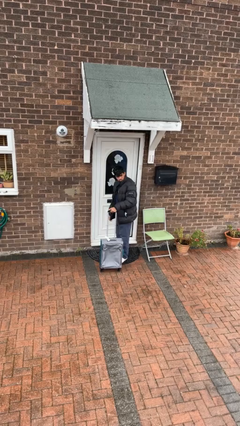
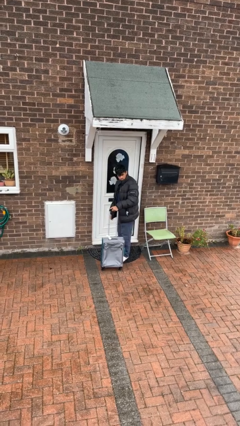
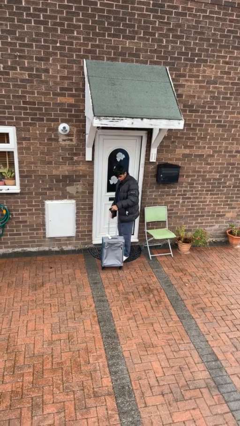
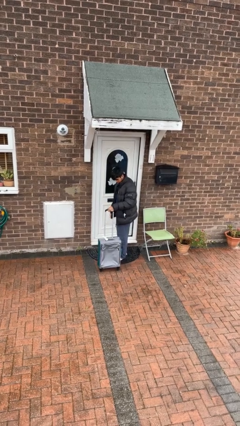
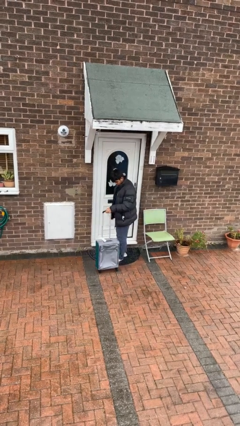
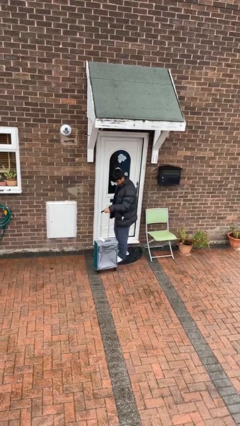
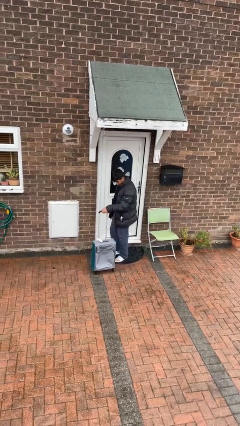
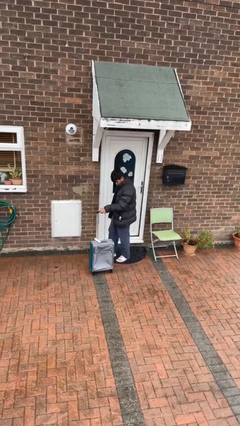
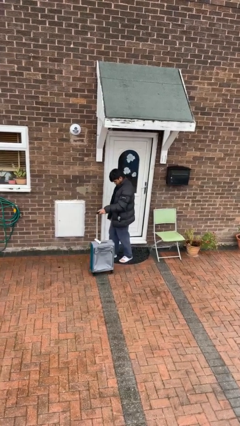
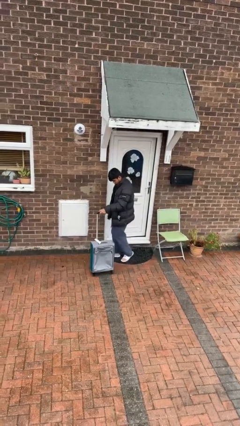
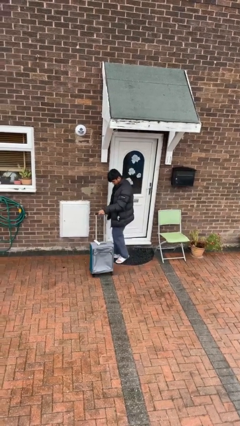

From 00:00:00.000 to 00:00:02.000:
person pushes wheeled cart

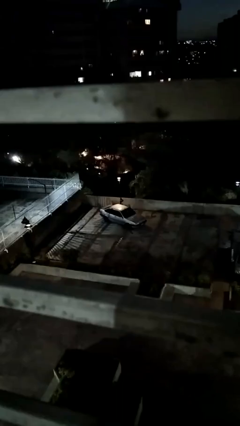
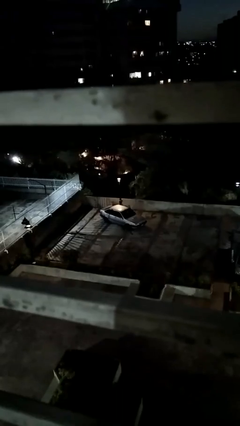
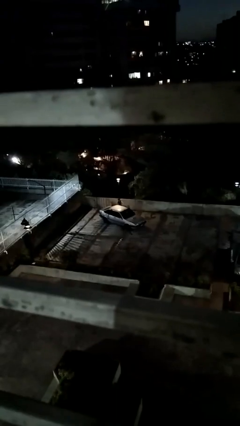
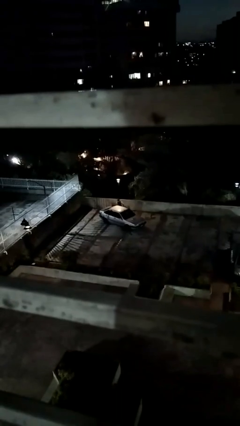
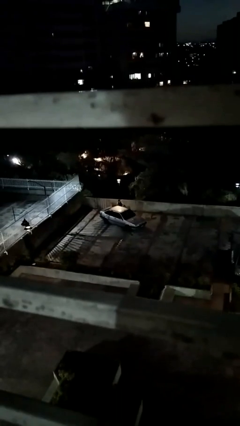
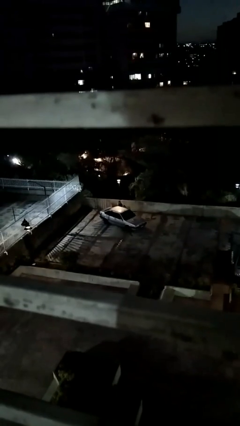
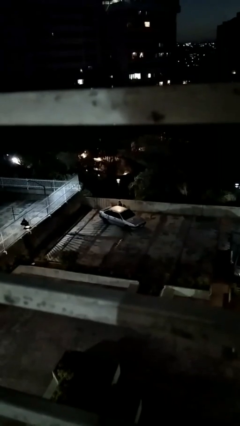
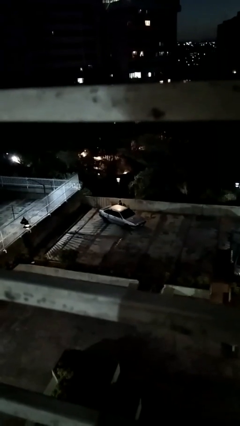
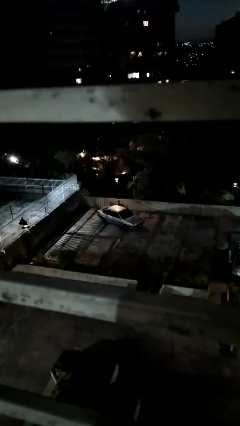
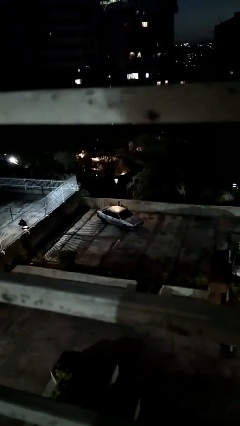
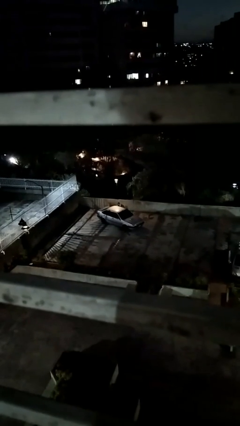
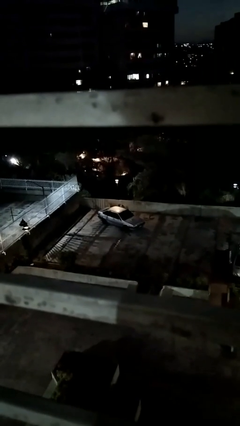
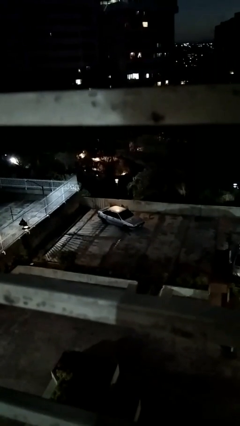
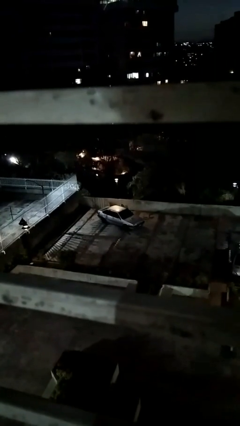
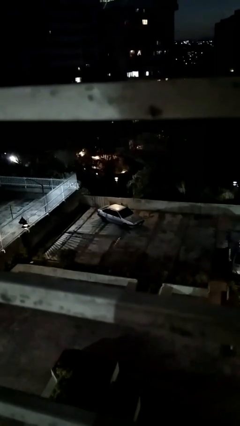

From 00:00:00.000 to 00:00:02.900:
car picks up person

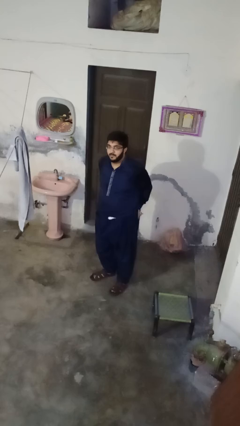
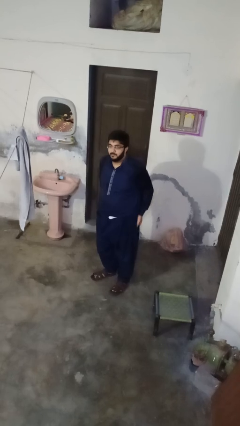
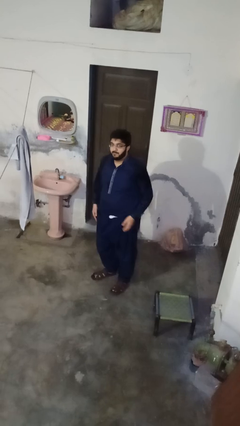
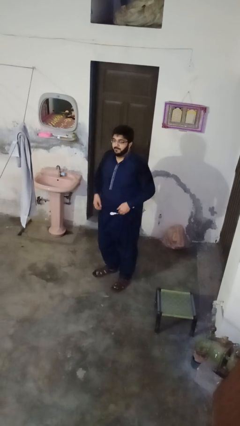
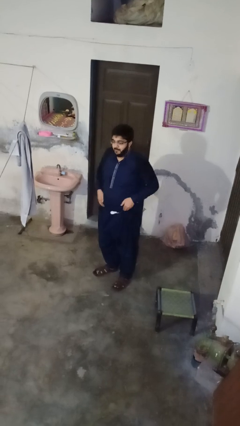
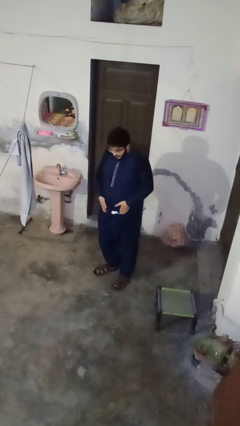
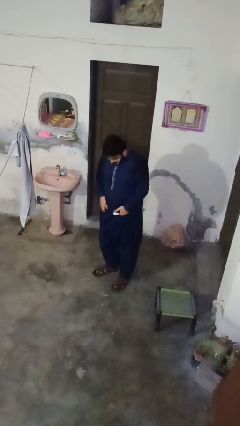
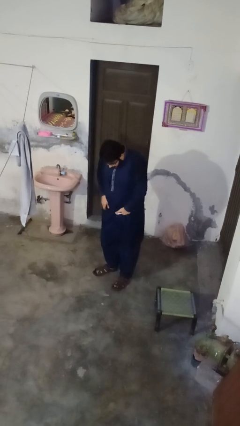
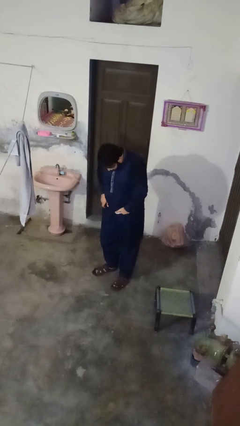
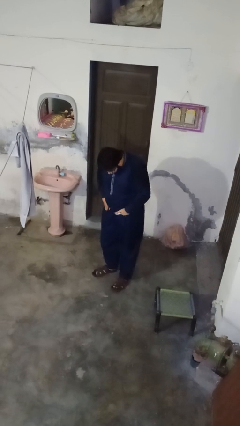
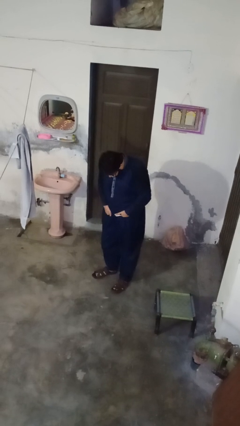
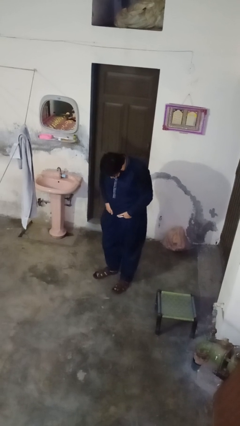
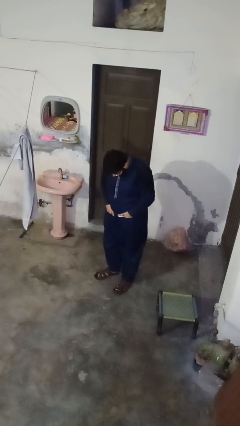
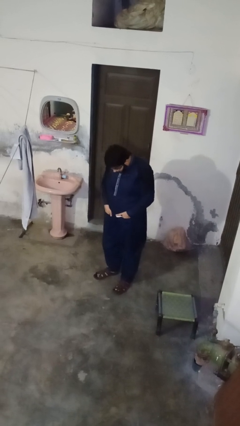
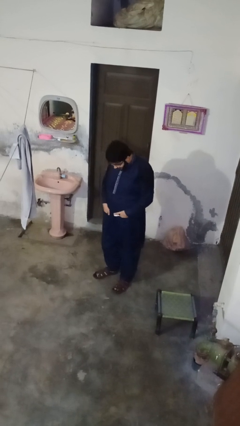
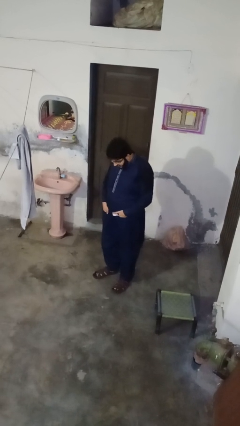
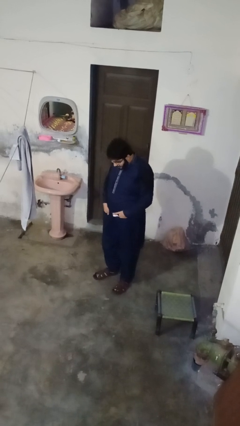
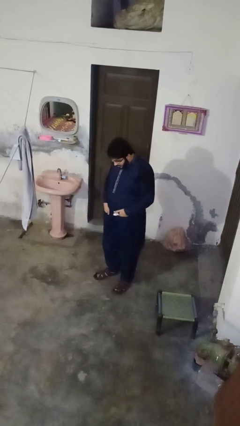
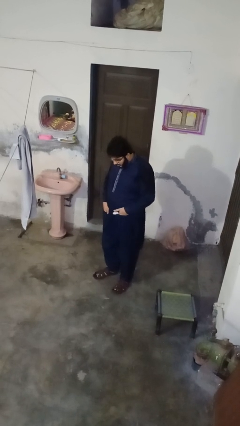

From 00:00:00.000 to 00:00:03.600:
person puts hands in back pockets

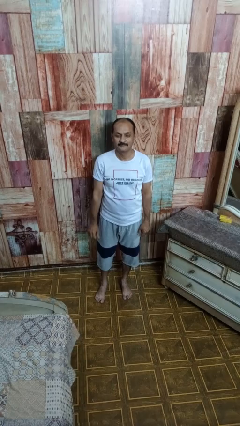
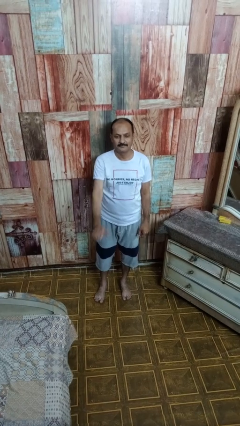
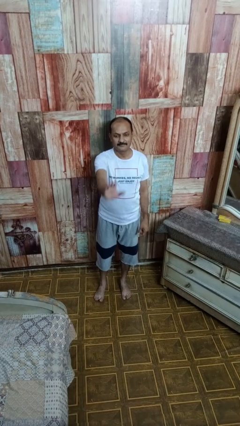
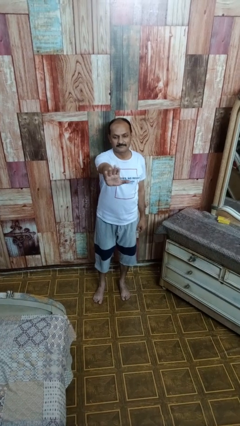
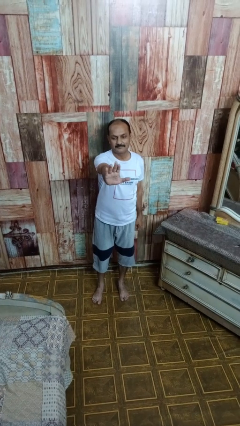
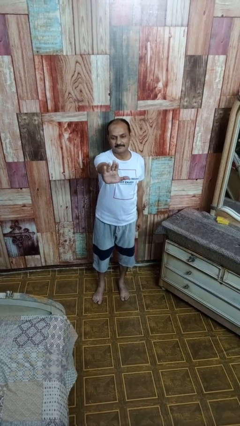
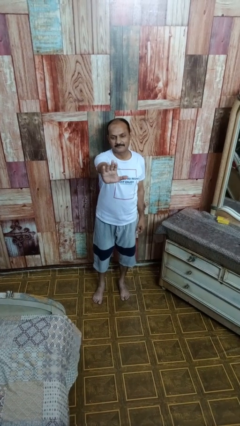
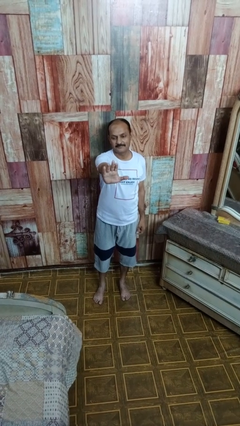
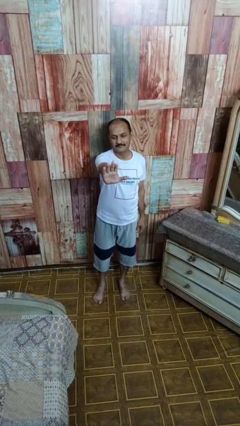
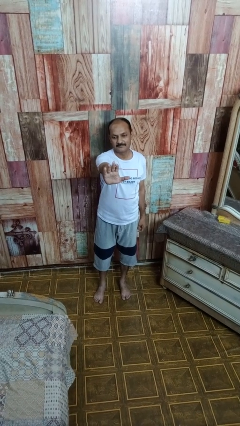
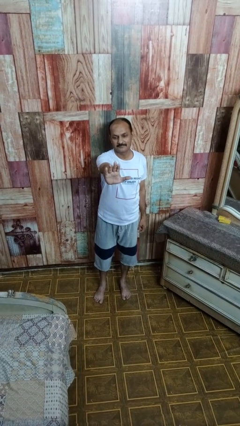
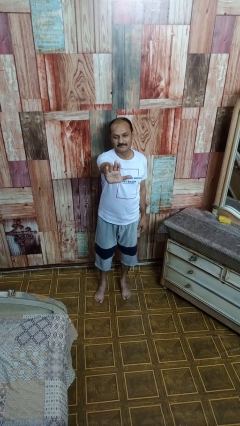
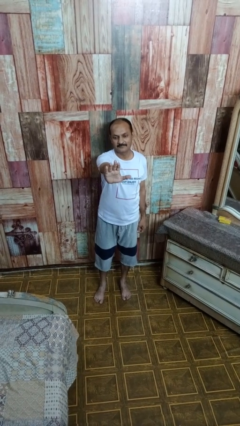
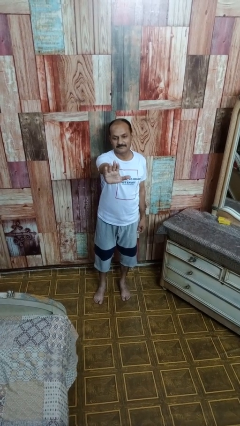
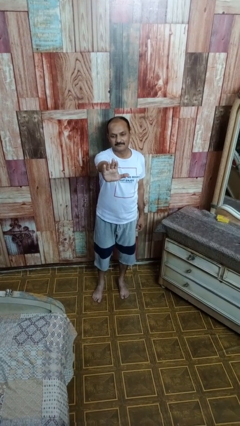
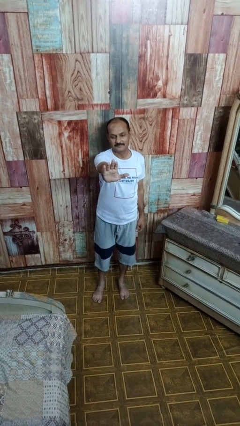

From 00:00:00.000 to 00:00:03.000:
person gestures stop

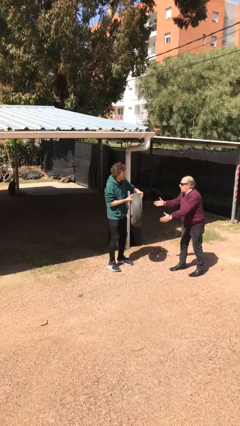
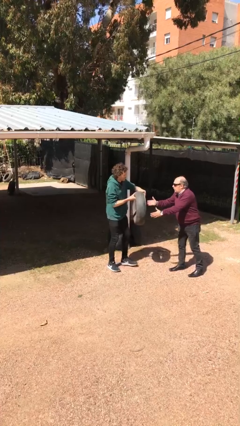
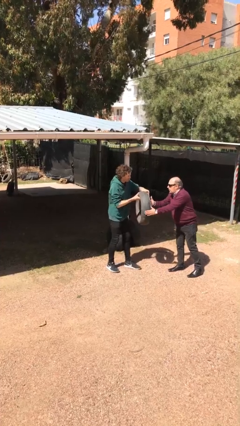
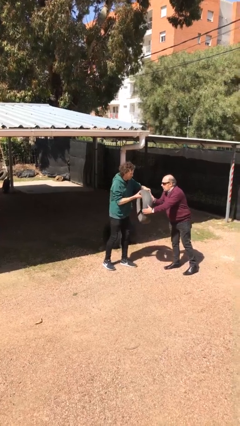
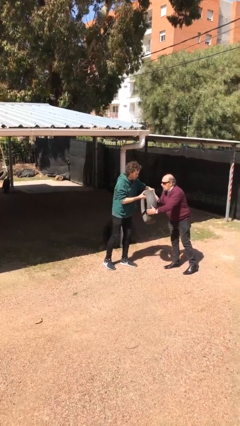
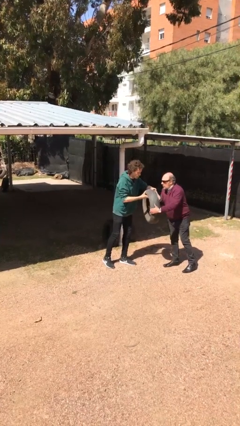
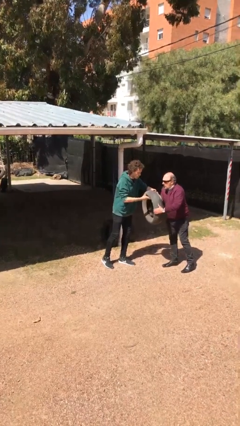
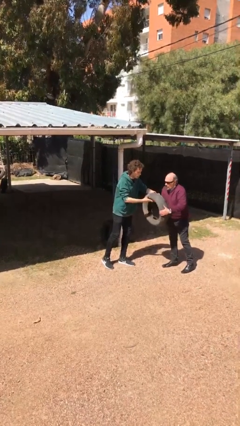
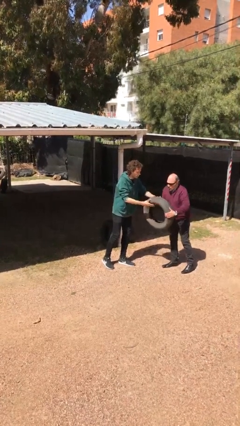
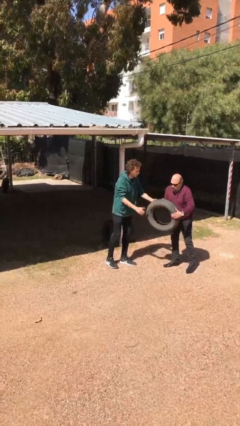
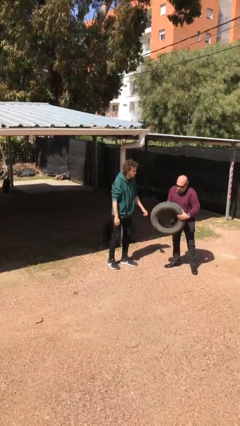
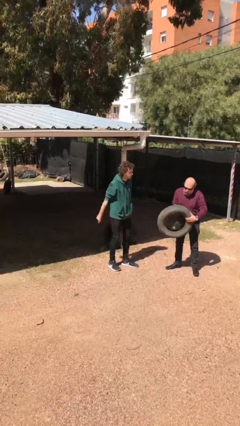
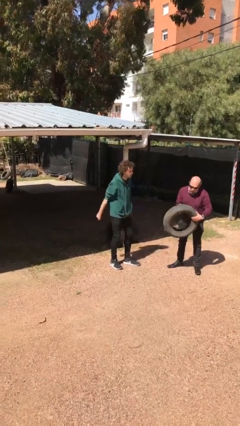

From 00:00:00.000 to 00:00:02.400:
person transfers object to person

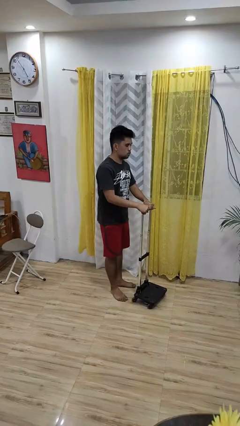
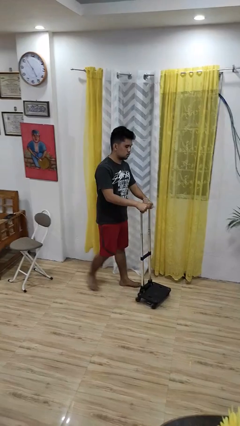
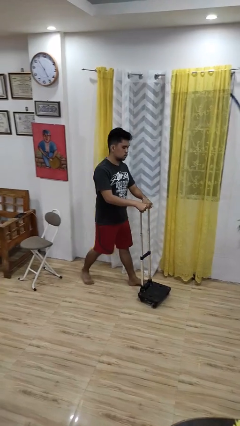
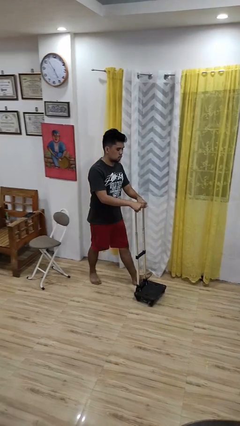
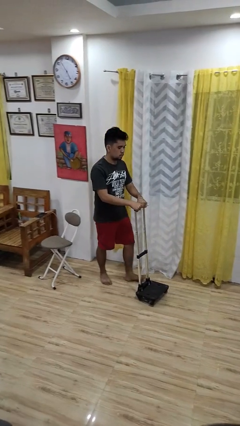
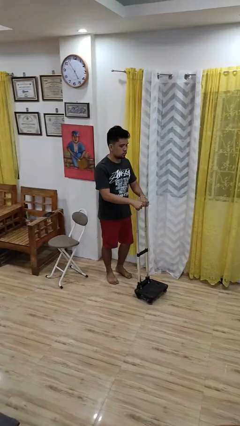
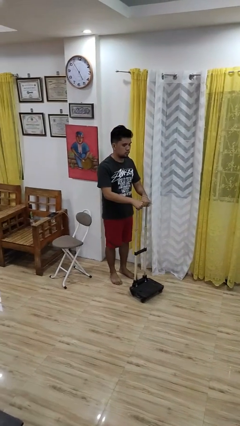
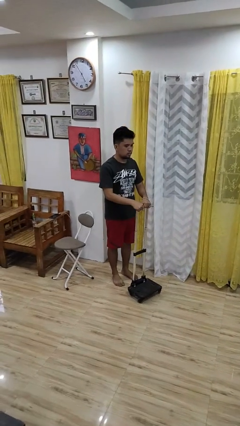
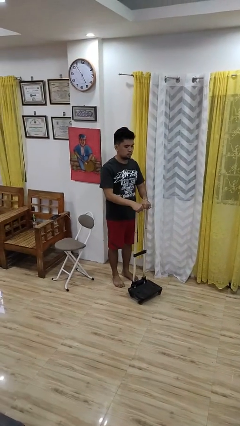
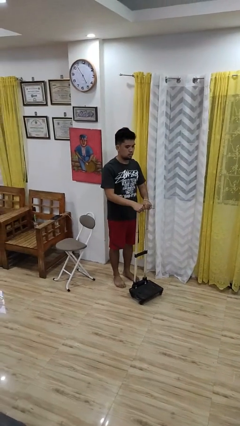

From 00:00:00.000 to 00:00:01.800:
person pulls wheeled cart

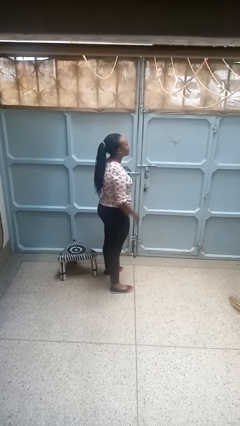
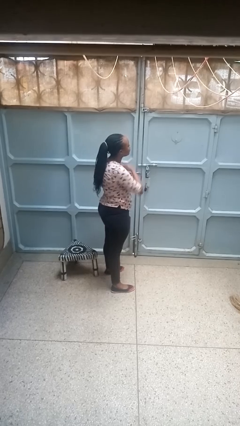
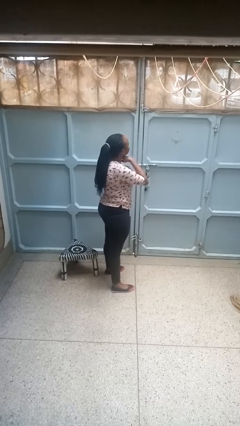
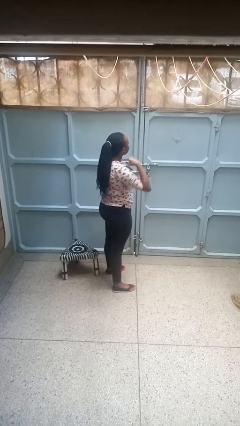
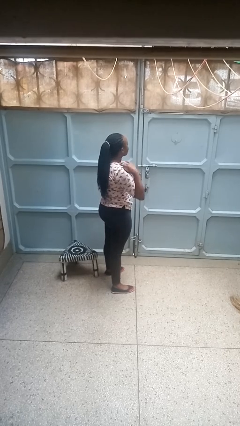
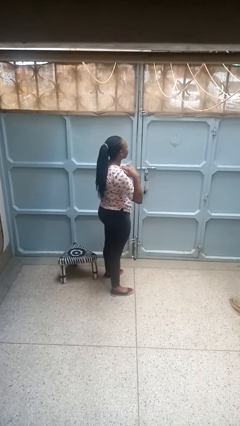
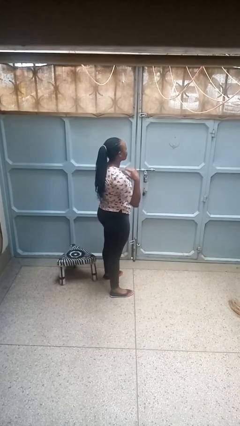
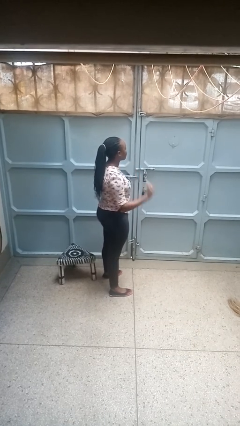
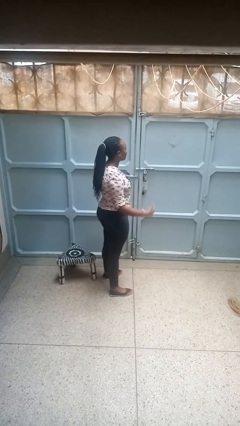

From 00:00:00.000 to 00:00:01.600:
person gestures cut
